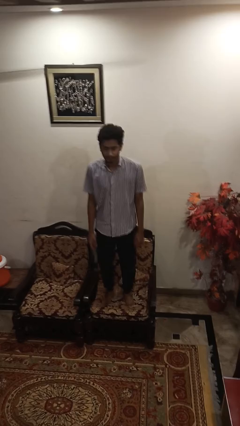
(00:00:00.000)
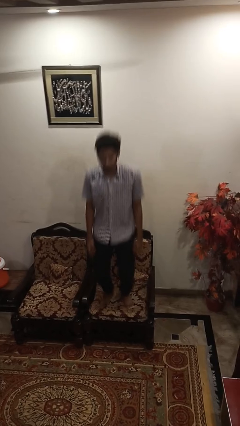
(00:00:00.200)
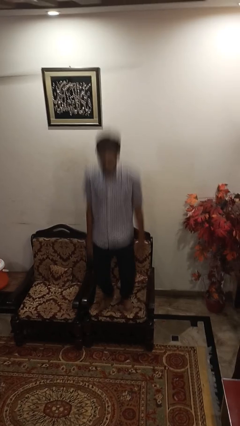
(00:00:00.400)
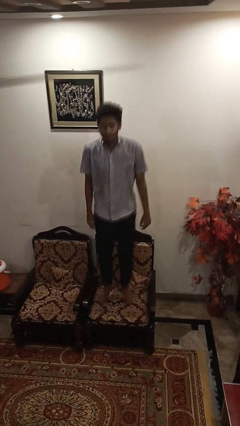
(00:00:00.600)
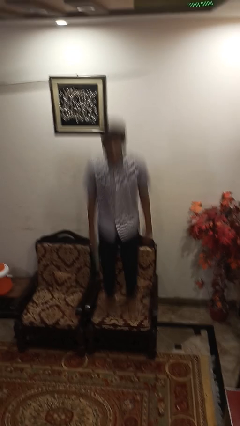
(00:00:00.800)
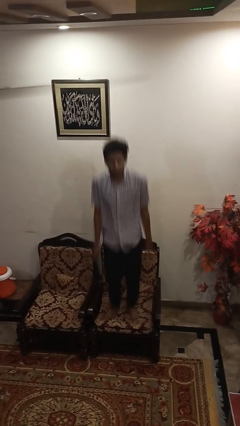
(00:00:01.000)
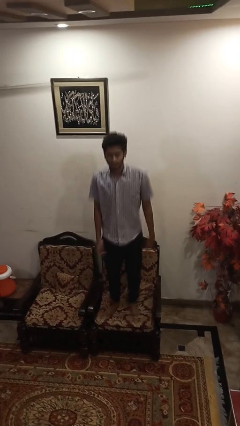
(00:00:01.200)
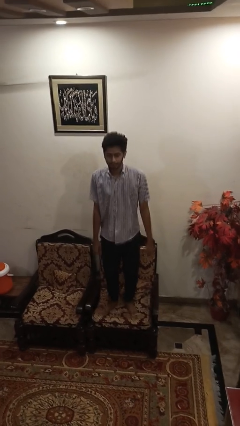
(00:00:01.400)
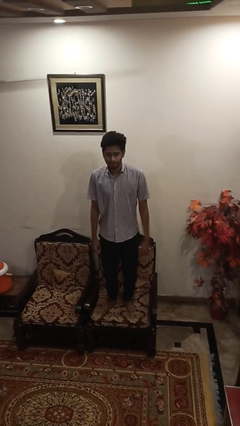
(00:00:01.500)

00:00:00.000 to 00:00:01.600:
person jumps on couch

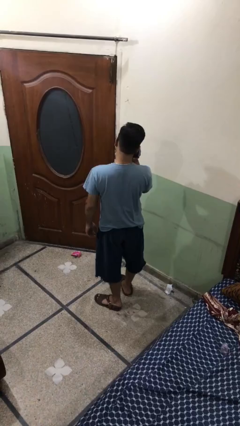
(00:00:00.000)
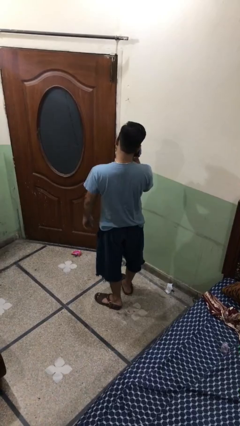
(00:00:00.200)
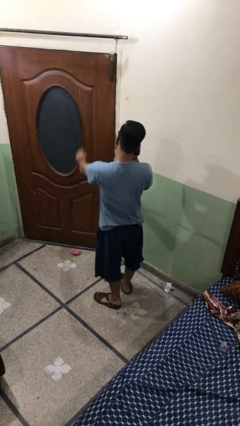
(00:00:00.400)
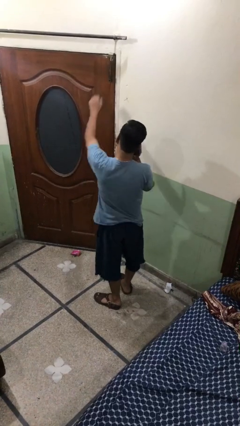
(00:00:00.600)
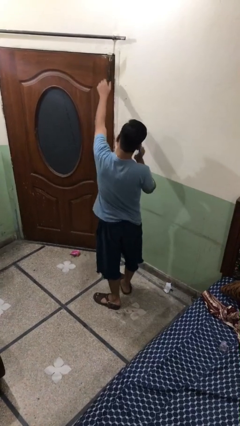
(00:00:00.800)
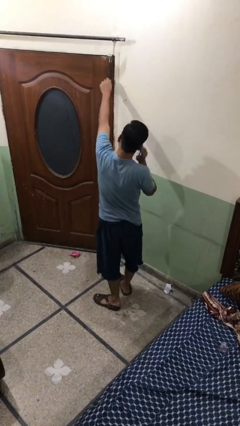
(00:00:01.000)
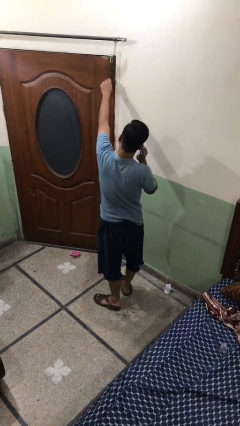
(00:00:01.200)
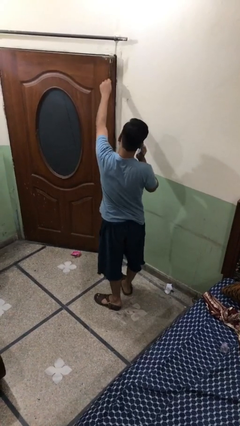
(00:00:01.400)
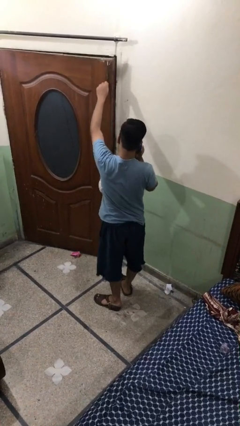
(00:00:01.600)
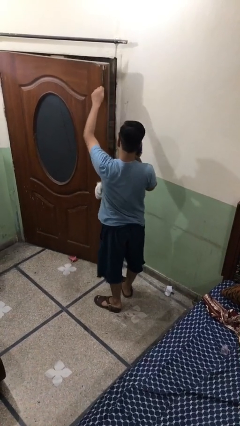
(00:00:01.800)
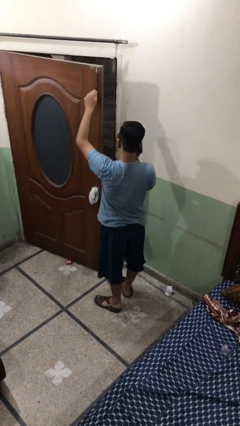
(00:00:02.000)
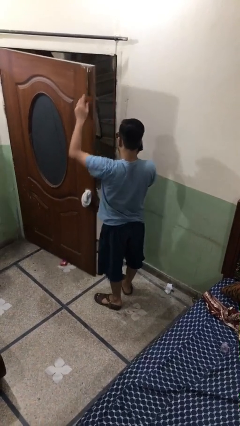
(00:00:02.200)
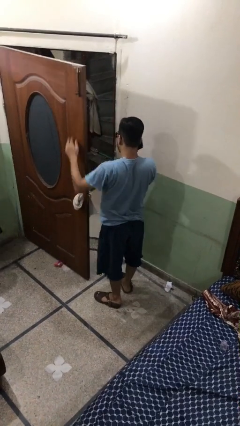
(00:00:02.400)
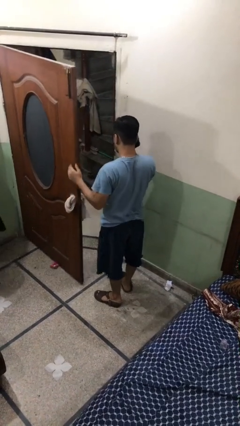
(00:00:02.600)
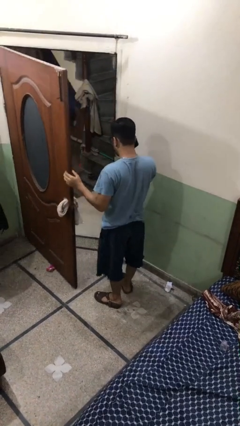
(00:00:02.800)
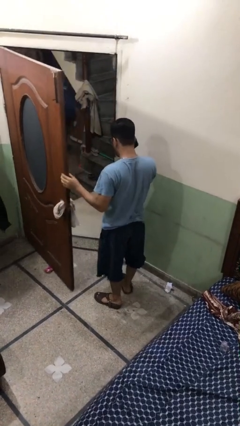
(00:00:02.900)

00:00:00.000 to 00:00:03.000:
person opens facility door

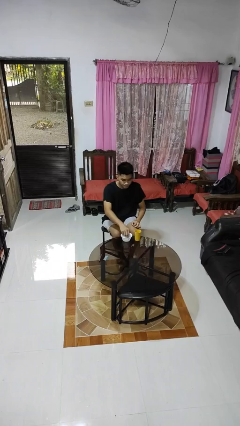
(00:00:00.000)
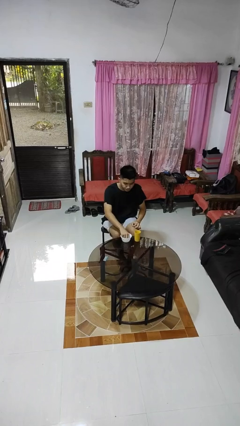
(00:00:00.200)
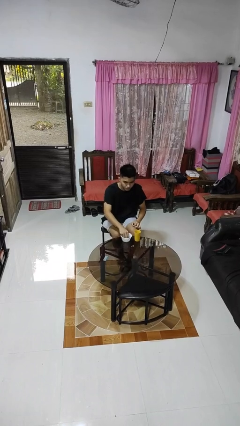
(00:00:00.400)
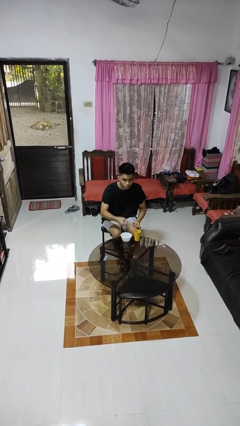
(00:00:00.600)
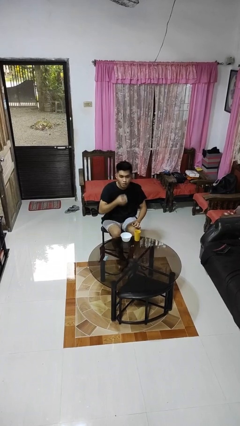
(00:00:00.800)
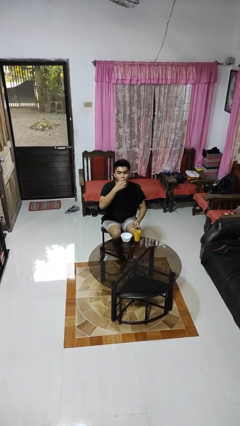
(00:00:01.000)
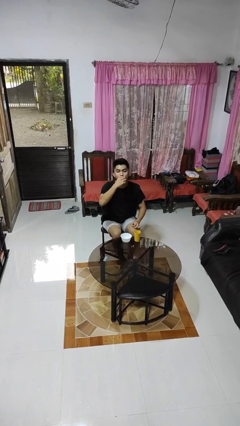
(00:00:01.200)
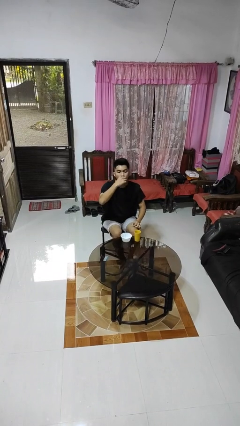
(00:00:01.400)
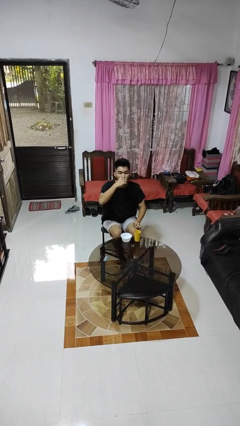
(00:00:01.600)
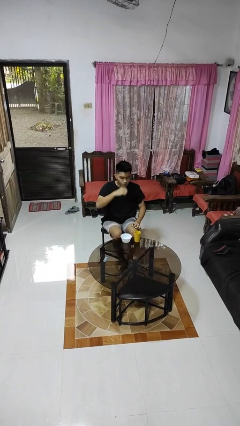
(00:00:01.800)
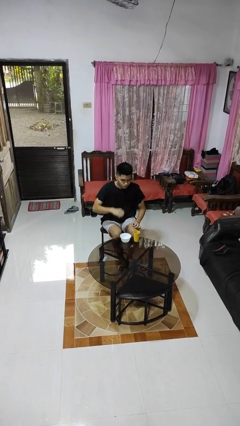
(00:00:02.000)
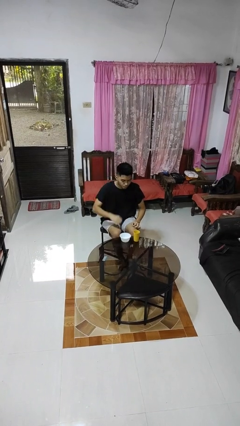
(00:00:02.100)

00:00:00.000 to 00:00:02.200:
person takes medicine pills

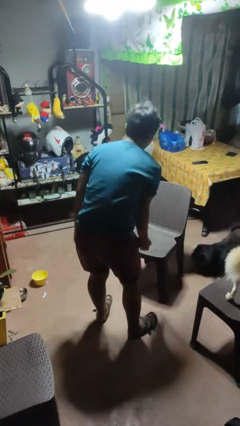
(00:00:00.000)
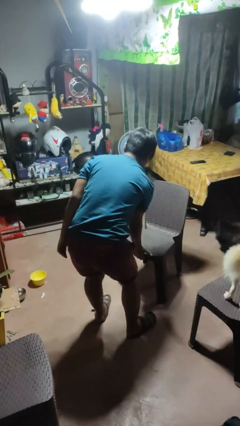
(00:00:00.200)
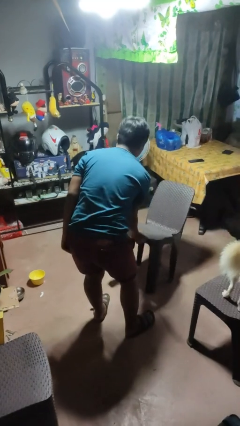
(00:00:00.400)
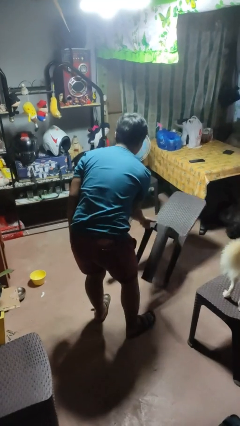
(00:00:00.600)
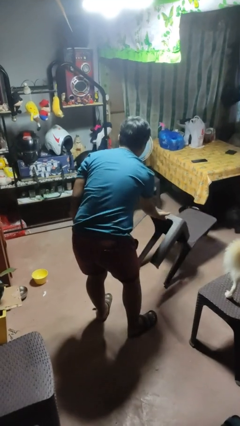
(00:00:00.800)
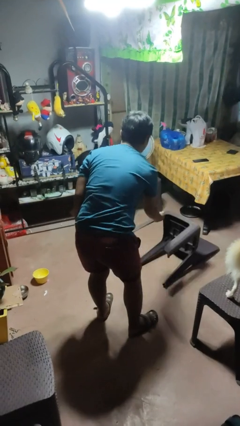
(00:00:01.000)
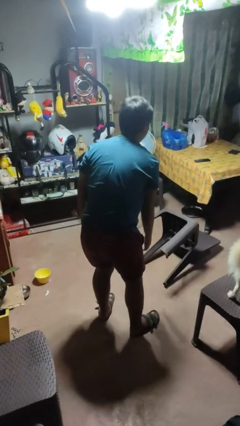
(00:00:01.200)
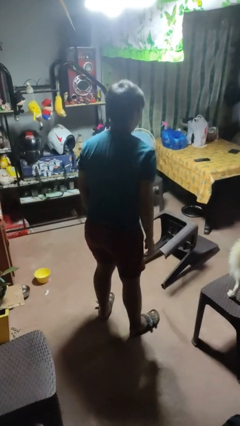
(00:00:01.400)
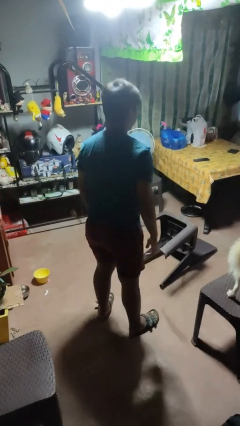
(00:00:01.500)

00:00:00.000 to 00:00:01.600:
person knocks over furniture

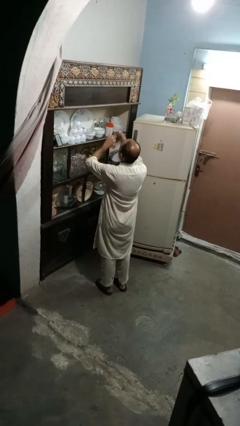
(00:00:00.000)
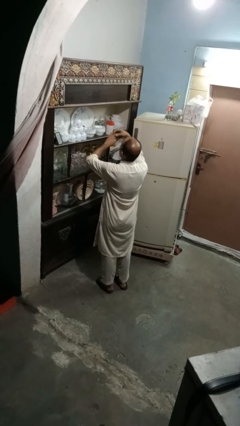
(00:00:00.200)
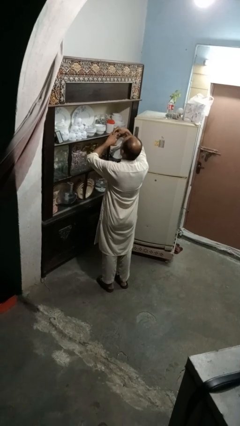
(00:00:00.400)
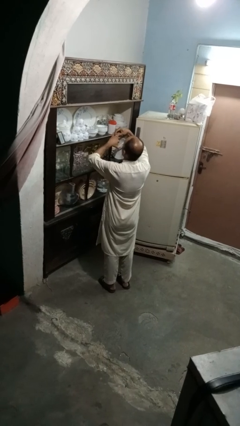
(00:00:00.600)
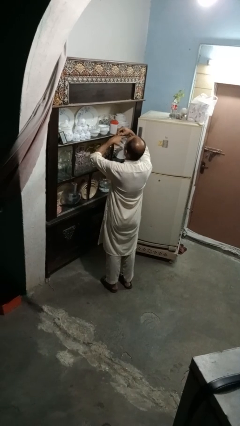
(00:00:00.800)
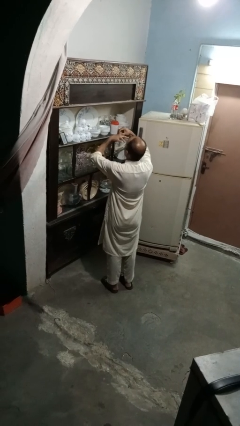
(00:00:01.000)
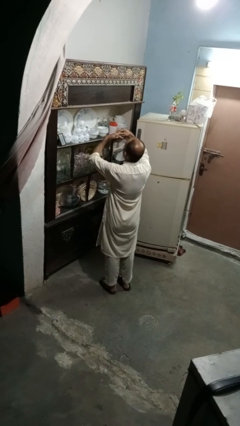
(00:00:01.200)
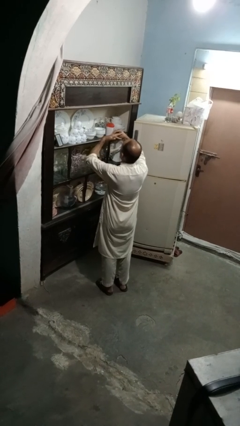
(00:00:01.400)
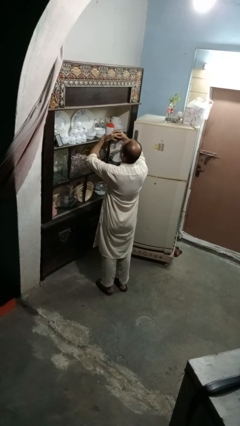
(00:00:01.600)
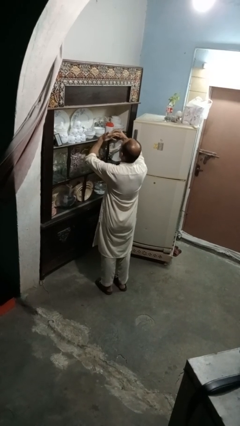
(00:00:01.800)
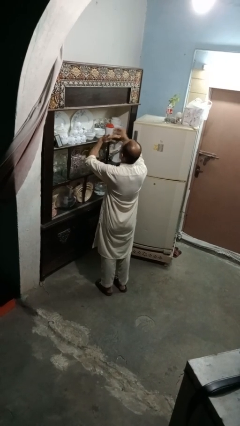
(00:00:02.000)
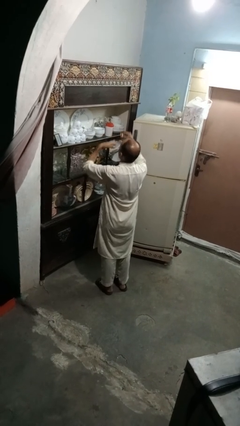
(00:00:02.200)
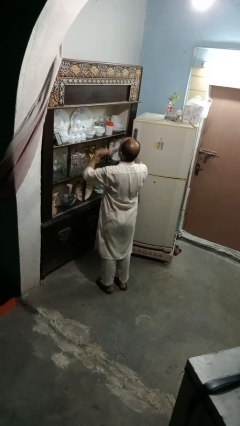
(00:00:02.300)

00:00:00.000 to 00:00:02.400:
person takes off ring

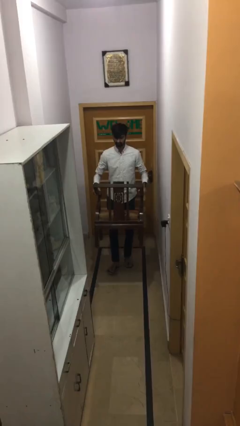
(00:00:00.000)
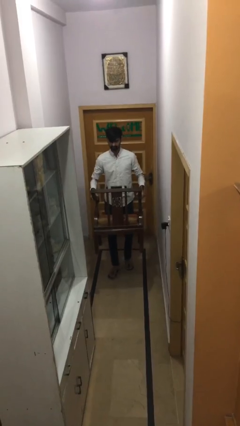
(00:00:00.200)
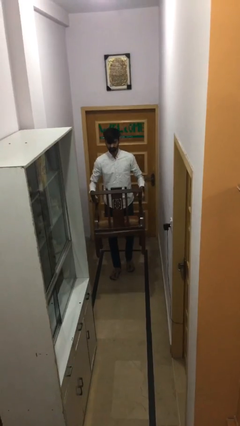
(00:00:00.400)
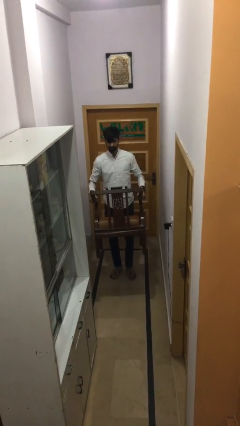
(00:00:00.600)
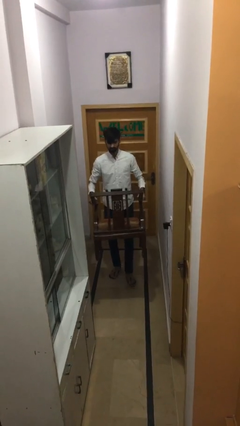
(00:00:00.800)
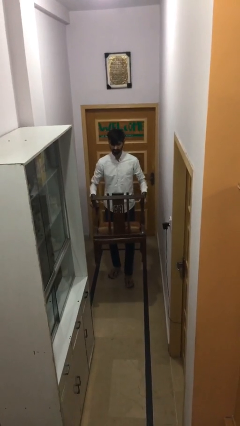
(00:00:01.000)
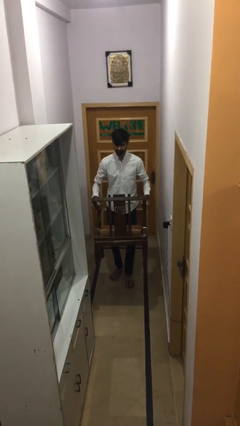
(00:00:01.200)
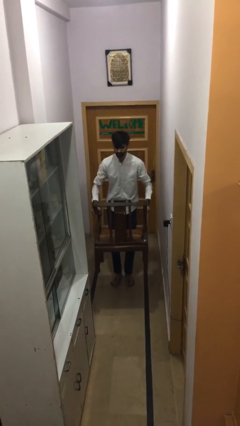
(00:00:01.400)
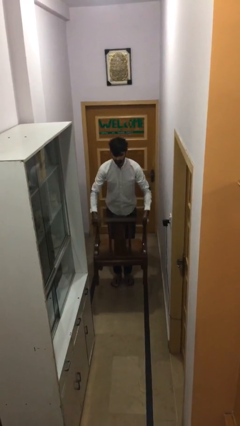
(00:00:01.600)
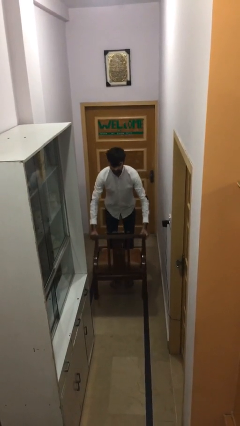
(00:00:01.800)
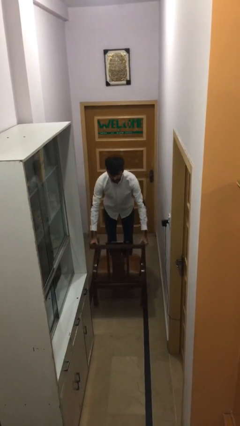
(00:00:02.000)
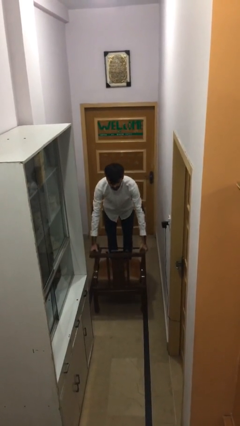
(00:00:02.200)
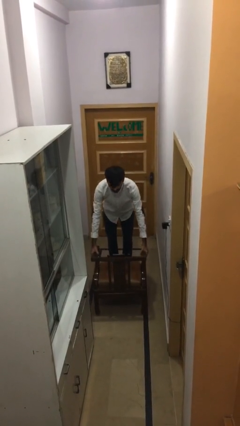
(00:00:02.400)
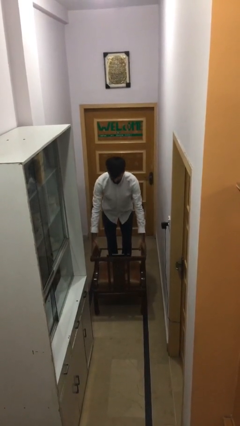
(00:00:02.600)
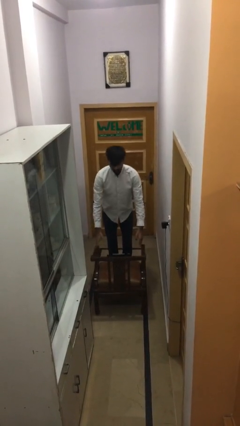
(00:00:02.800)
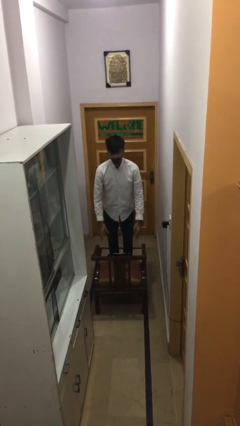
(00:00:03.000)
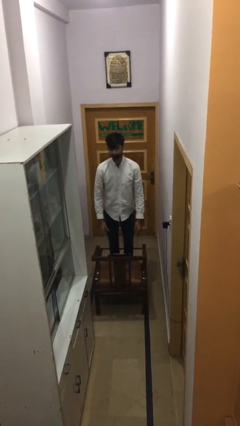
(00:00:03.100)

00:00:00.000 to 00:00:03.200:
person puts down object on floor

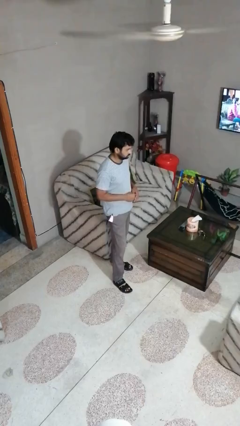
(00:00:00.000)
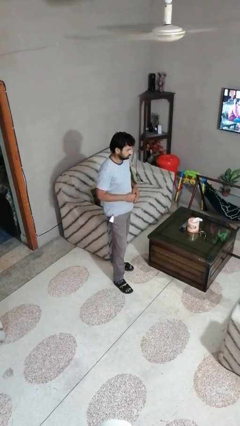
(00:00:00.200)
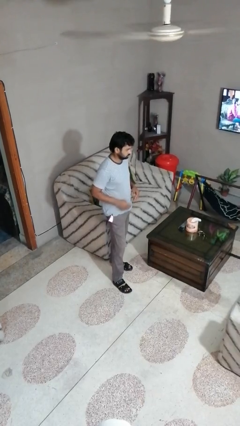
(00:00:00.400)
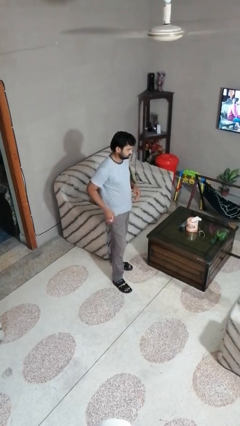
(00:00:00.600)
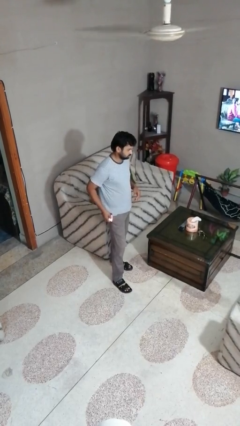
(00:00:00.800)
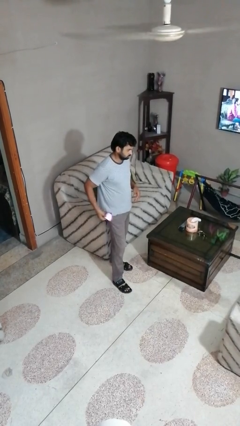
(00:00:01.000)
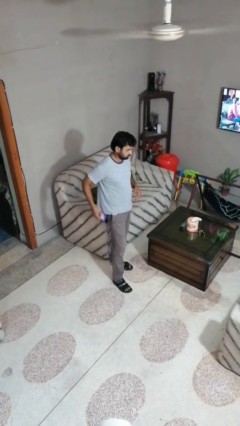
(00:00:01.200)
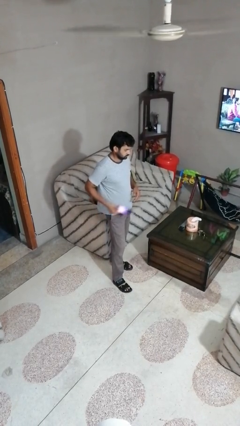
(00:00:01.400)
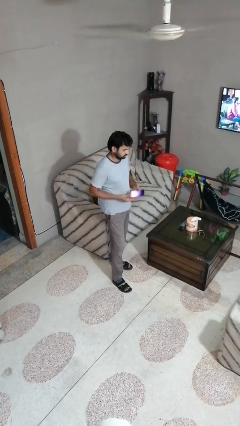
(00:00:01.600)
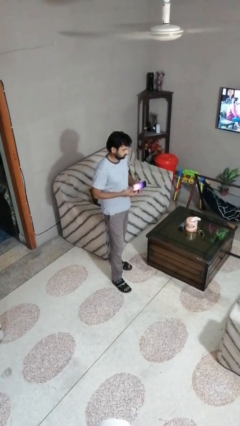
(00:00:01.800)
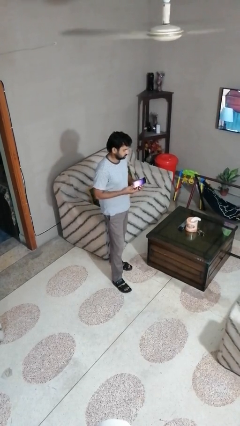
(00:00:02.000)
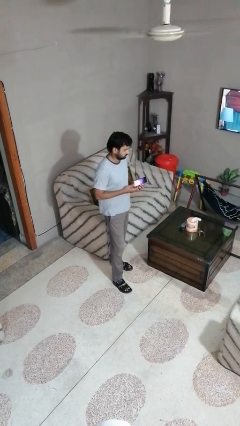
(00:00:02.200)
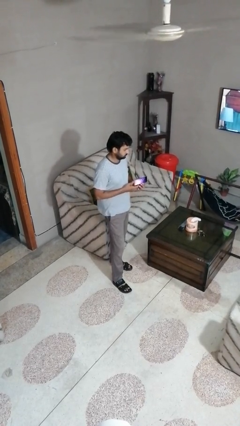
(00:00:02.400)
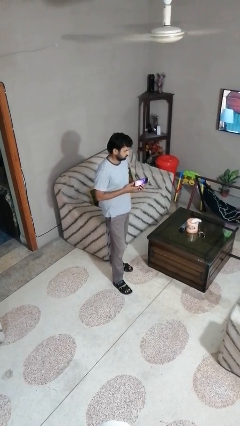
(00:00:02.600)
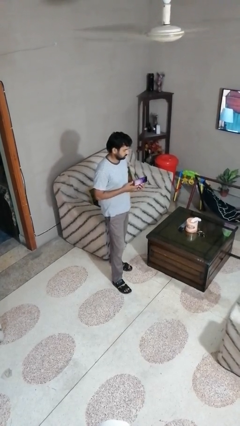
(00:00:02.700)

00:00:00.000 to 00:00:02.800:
person takes phone from pocket

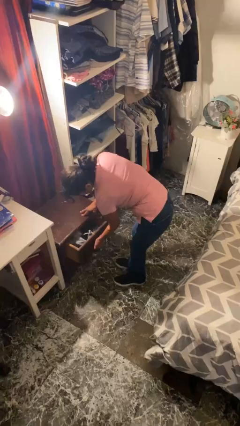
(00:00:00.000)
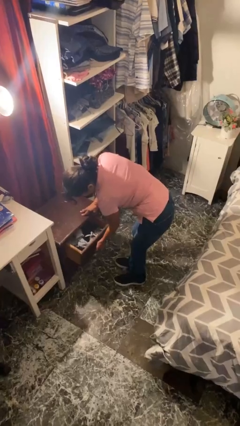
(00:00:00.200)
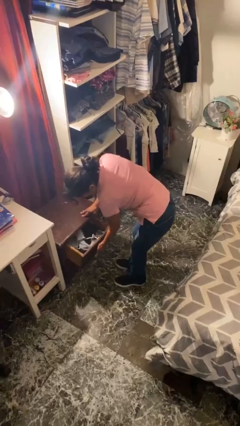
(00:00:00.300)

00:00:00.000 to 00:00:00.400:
person opens dresser drawer
